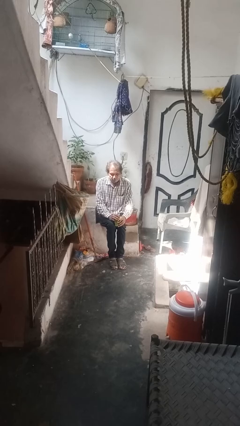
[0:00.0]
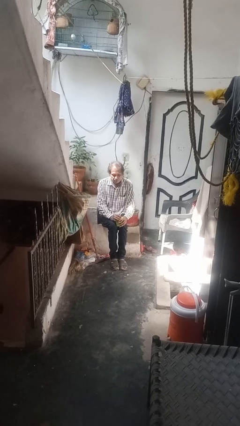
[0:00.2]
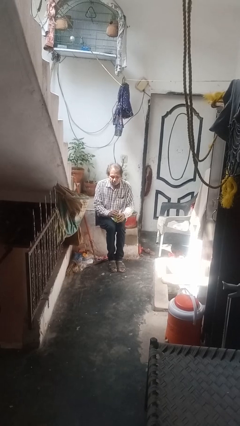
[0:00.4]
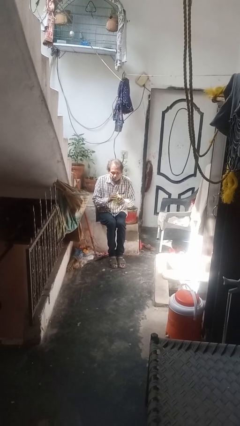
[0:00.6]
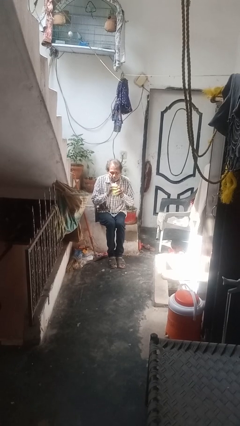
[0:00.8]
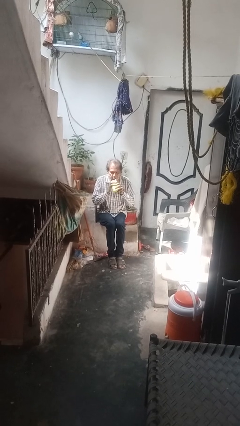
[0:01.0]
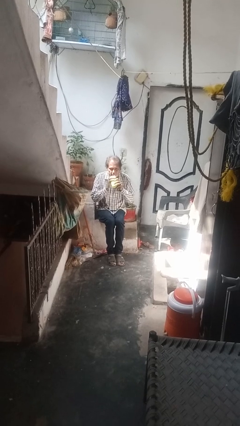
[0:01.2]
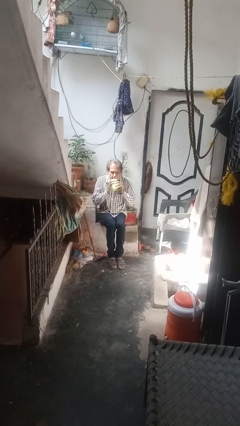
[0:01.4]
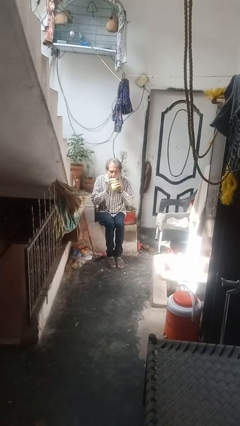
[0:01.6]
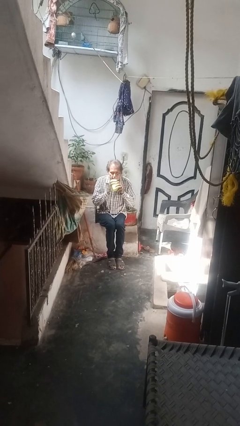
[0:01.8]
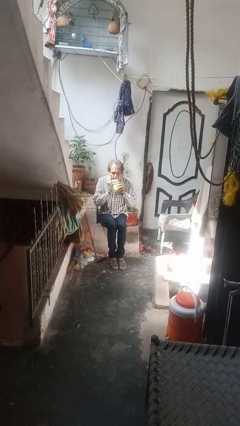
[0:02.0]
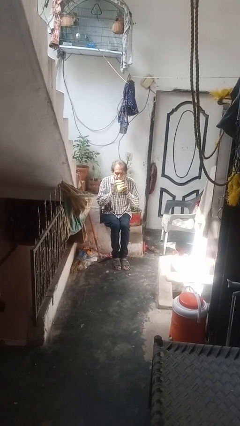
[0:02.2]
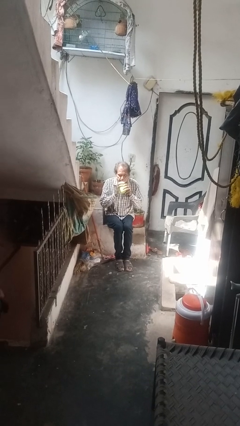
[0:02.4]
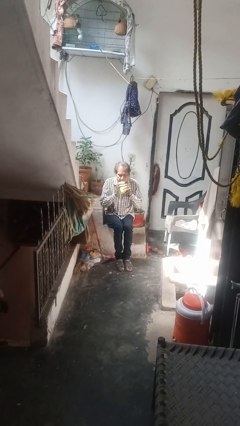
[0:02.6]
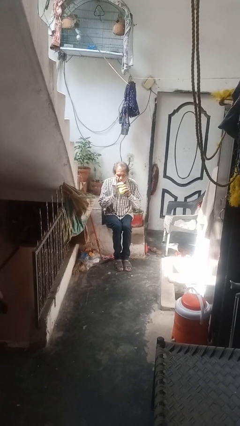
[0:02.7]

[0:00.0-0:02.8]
person drinks from straw

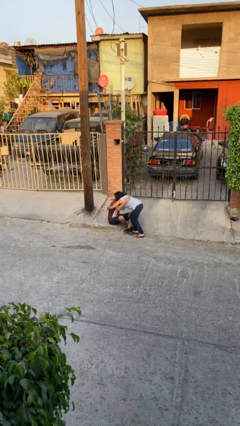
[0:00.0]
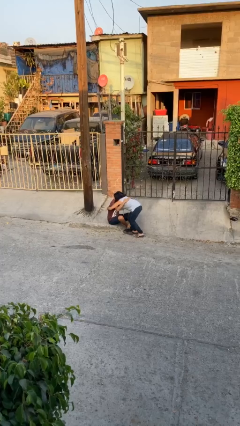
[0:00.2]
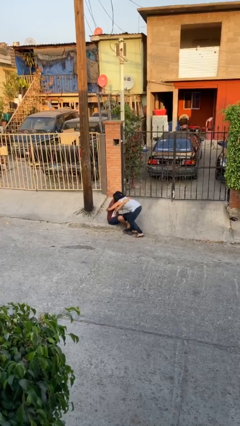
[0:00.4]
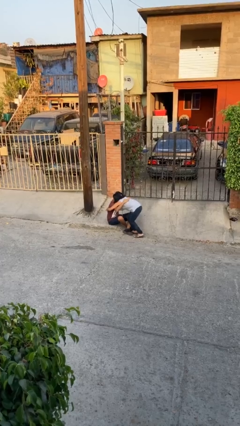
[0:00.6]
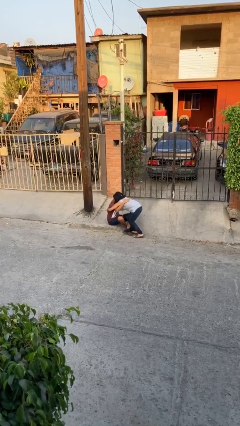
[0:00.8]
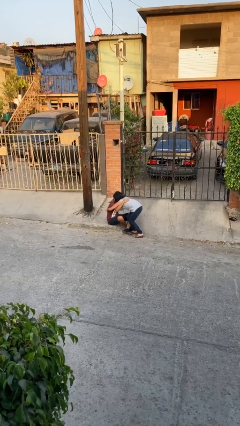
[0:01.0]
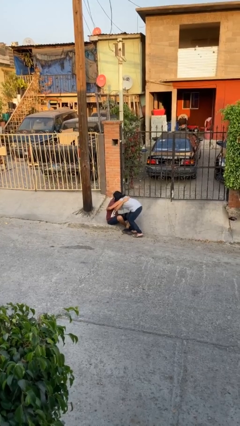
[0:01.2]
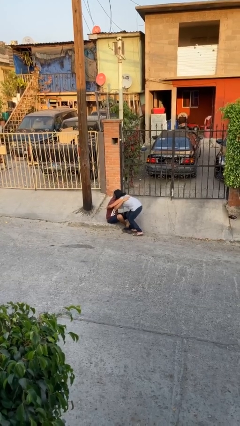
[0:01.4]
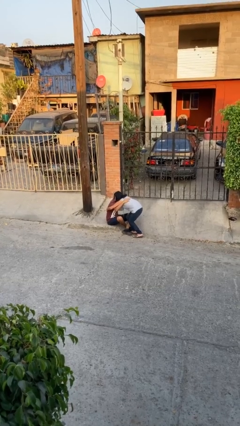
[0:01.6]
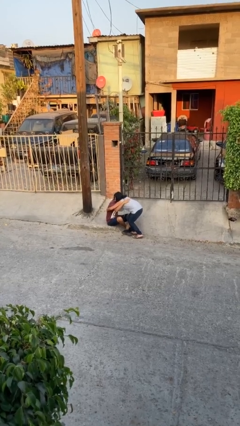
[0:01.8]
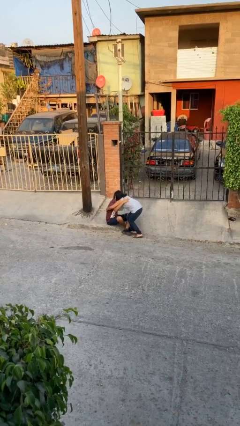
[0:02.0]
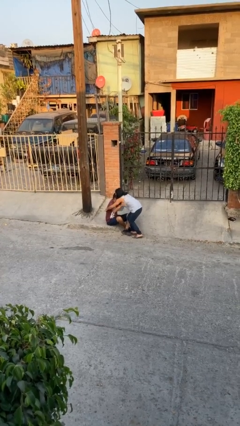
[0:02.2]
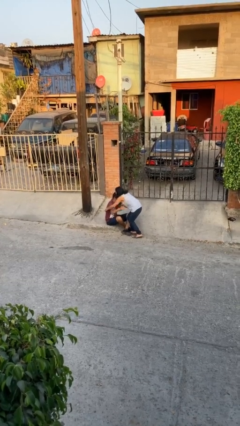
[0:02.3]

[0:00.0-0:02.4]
person embraces person

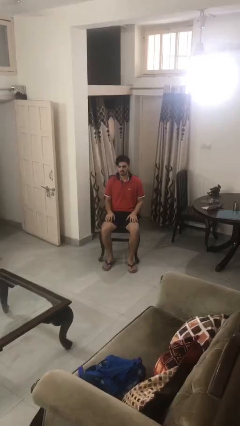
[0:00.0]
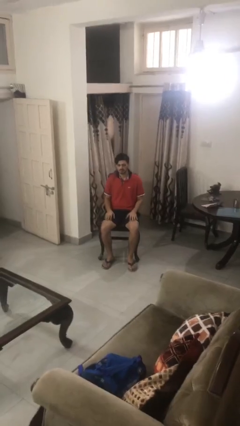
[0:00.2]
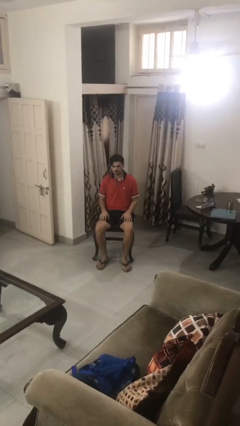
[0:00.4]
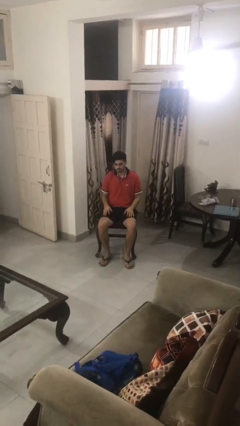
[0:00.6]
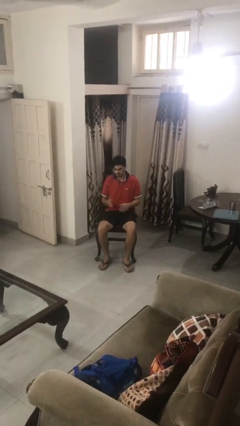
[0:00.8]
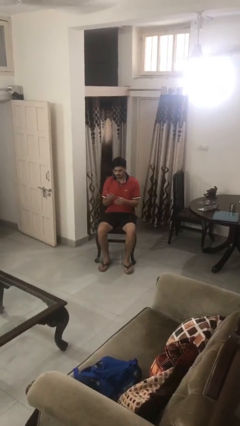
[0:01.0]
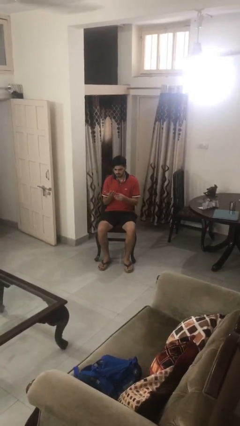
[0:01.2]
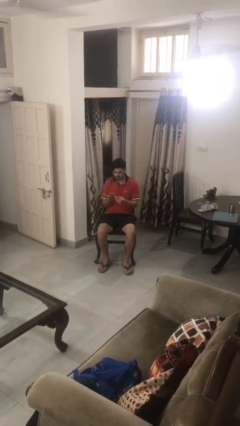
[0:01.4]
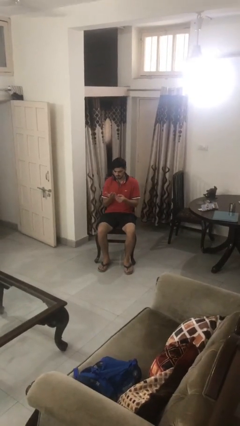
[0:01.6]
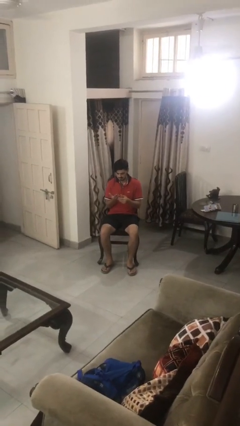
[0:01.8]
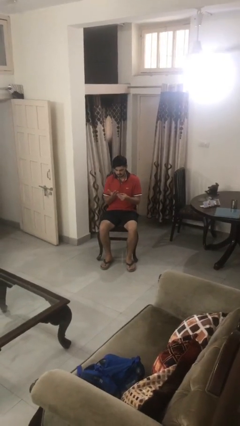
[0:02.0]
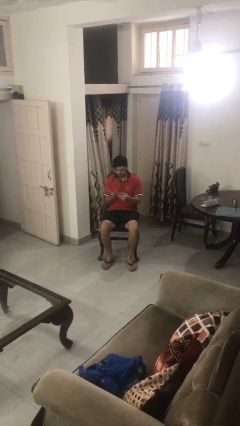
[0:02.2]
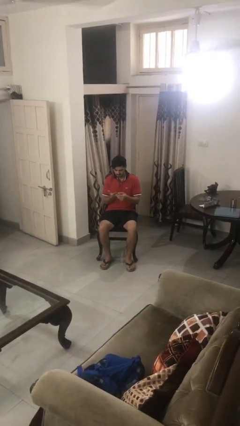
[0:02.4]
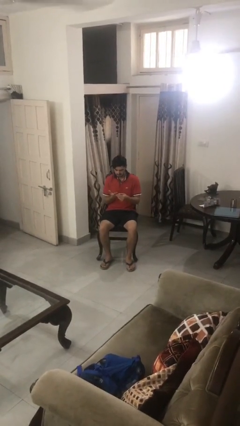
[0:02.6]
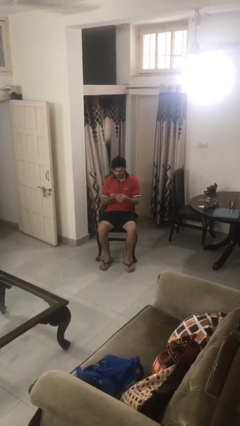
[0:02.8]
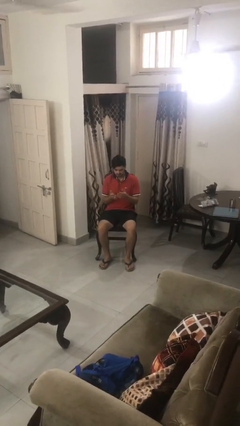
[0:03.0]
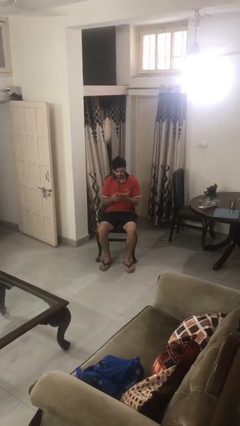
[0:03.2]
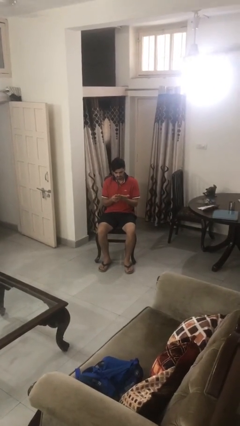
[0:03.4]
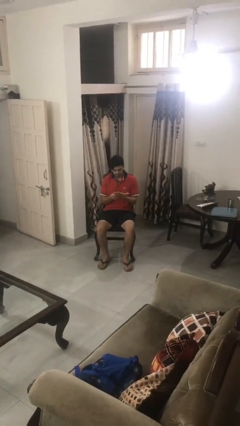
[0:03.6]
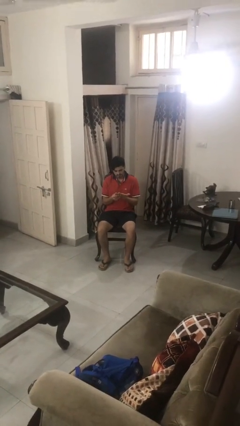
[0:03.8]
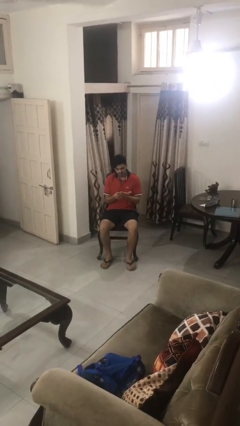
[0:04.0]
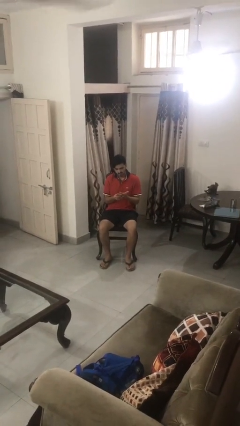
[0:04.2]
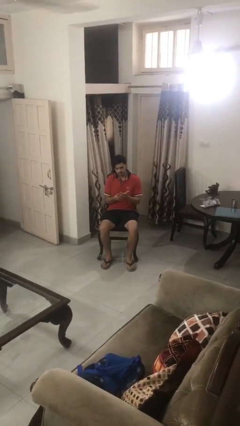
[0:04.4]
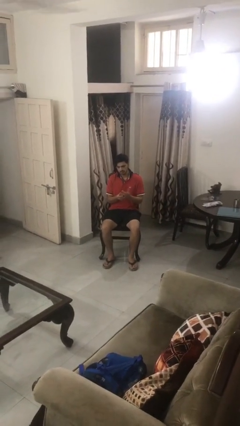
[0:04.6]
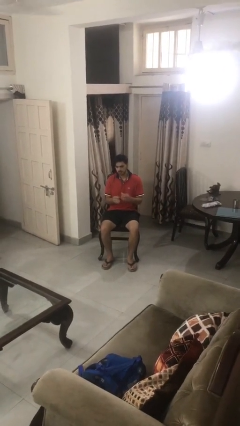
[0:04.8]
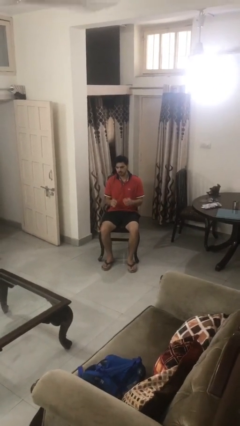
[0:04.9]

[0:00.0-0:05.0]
person looks at hands in lap

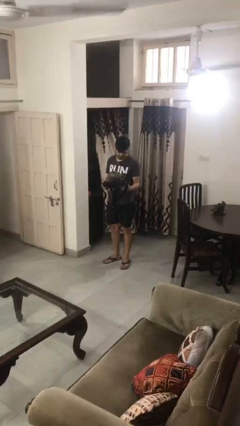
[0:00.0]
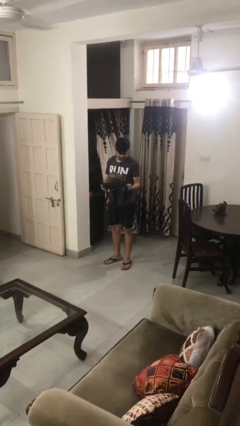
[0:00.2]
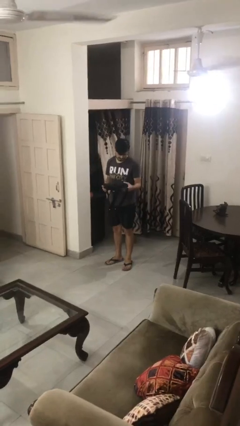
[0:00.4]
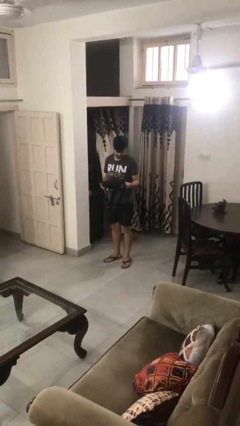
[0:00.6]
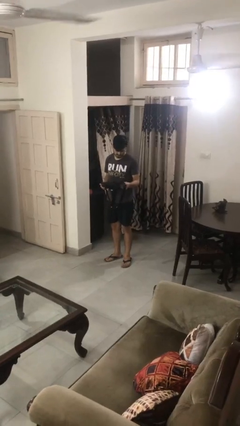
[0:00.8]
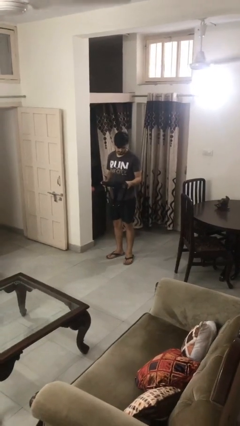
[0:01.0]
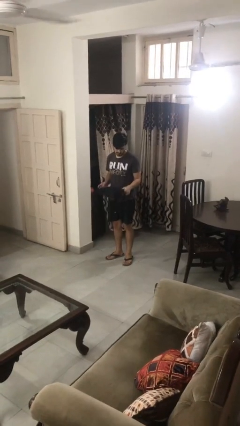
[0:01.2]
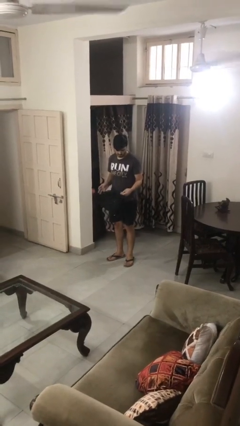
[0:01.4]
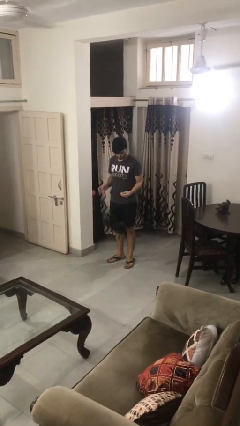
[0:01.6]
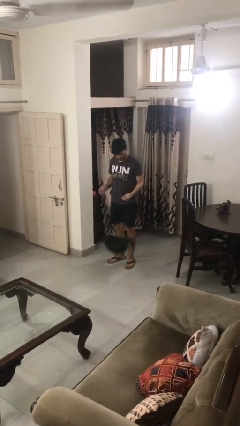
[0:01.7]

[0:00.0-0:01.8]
person drops object

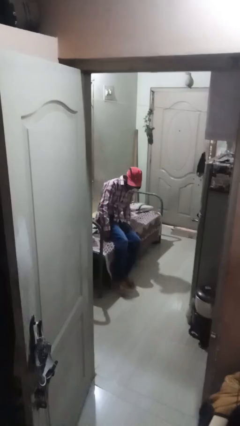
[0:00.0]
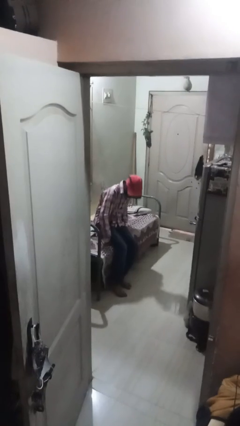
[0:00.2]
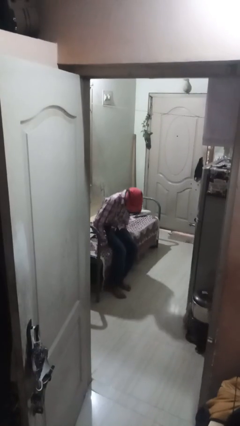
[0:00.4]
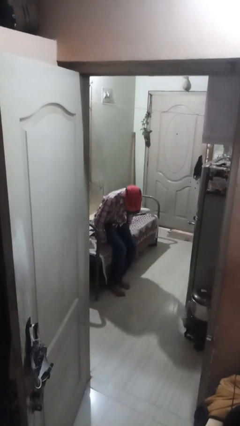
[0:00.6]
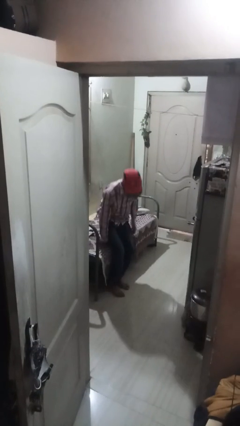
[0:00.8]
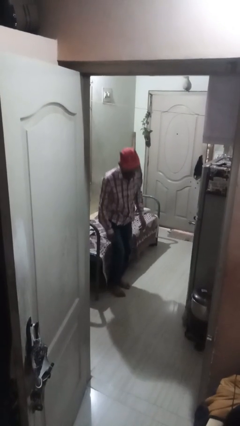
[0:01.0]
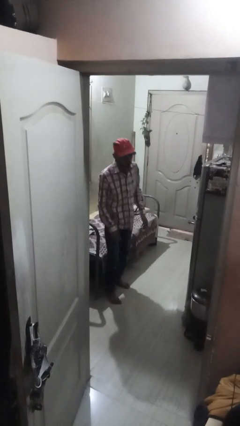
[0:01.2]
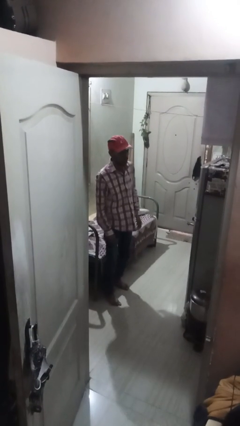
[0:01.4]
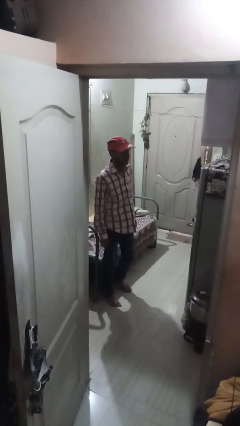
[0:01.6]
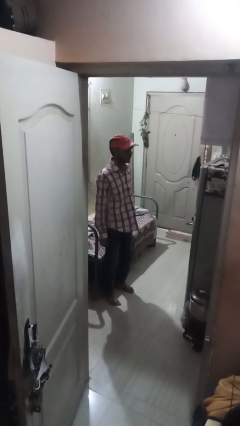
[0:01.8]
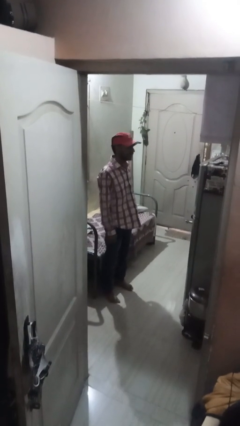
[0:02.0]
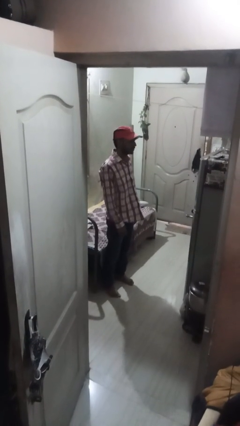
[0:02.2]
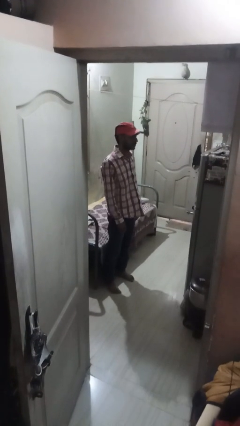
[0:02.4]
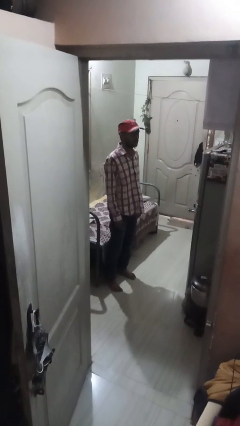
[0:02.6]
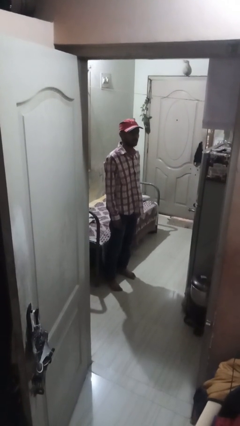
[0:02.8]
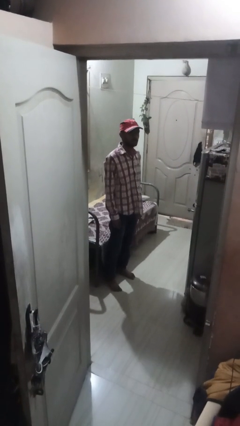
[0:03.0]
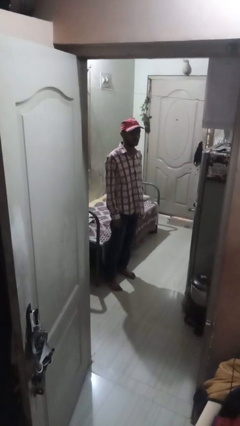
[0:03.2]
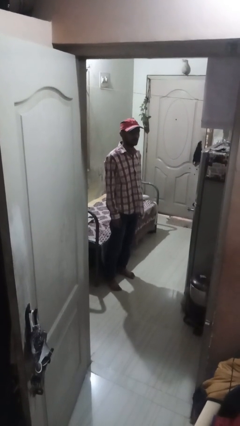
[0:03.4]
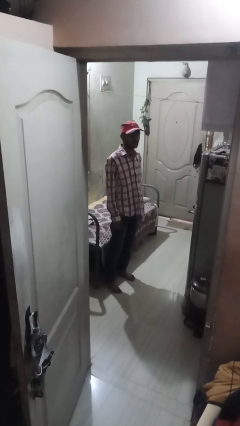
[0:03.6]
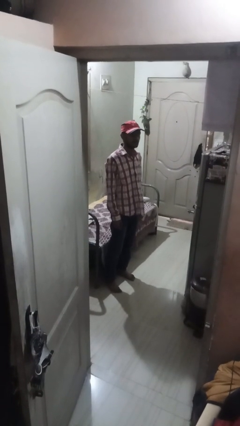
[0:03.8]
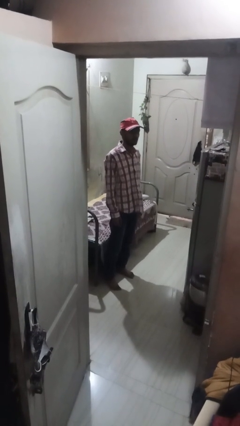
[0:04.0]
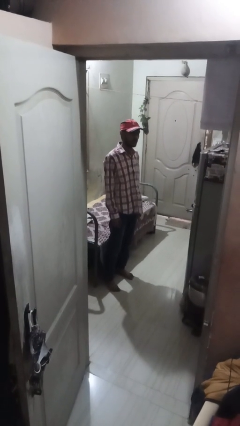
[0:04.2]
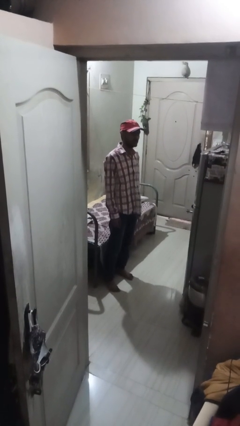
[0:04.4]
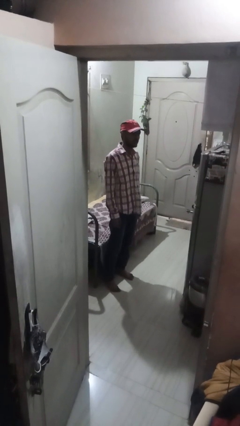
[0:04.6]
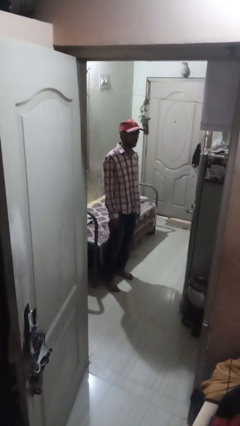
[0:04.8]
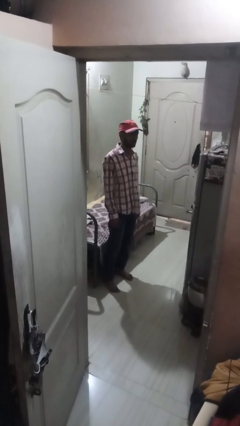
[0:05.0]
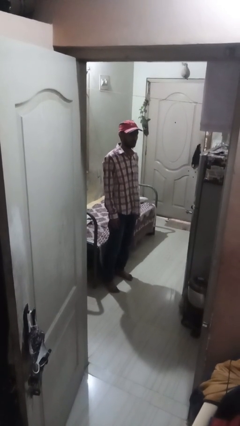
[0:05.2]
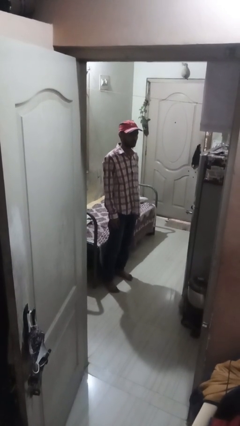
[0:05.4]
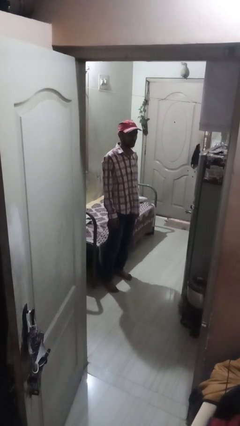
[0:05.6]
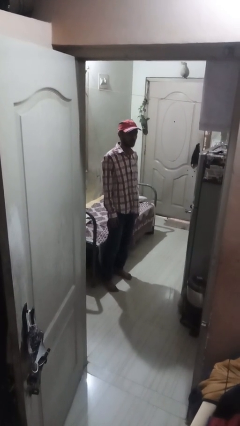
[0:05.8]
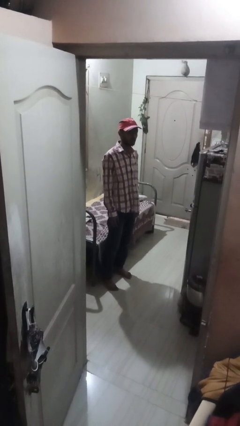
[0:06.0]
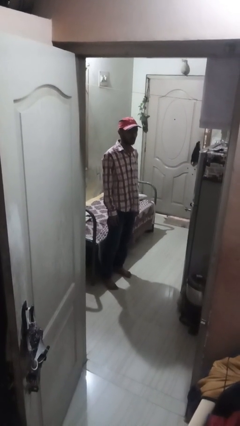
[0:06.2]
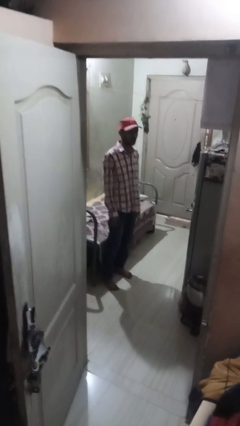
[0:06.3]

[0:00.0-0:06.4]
person stands up
